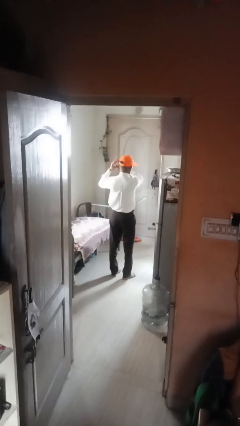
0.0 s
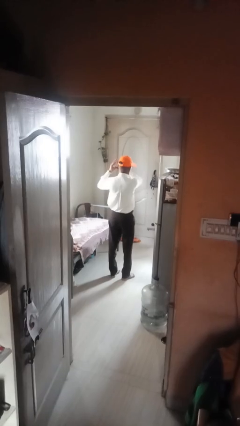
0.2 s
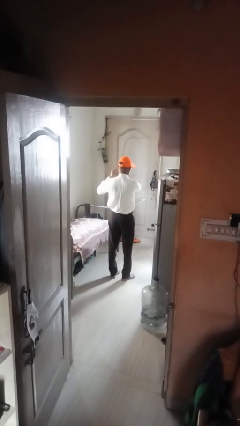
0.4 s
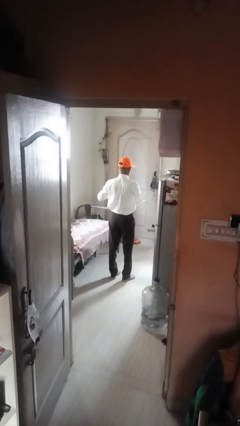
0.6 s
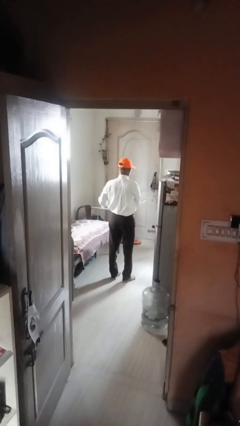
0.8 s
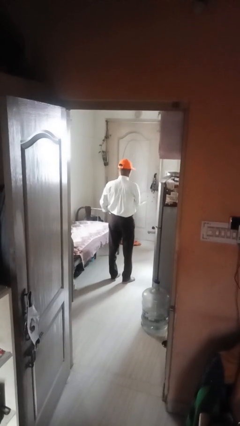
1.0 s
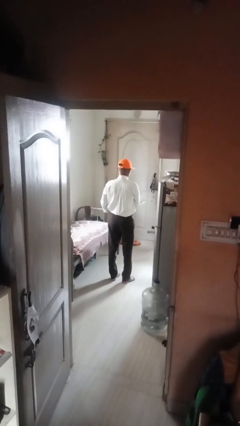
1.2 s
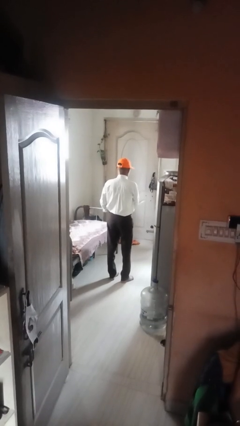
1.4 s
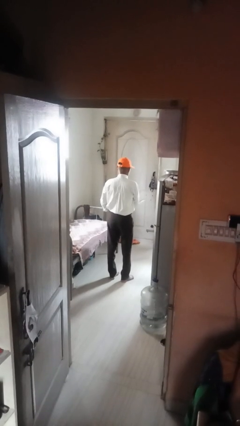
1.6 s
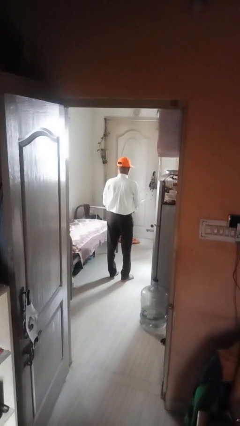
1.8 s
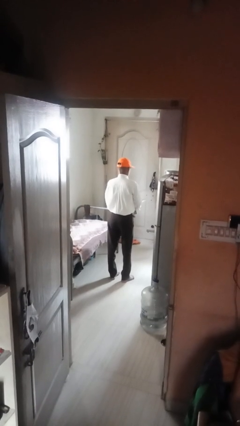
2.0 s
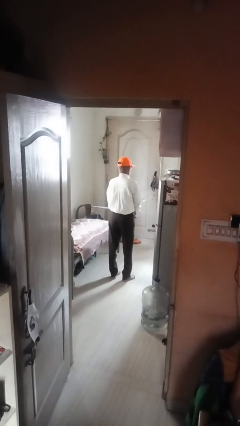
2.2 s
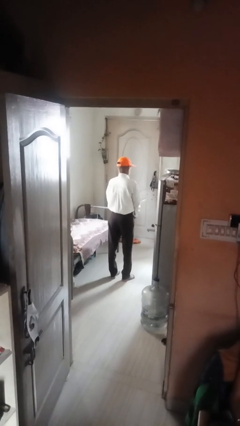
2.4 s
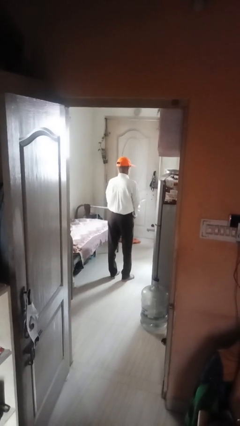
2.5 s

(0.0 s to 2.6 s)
person gestures heart

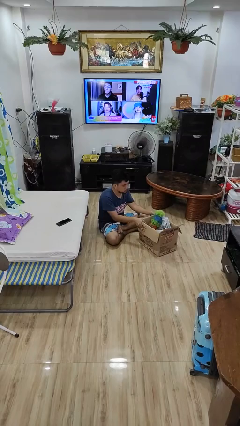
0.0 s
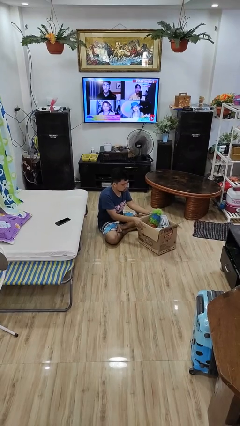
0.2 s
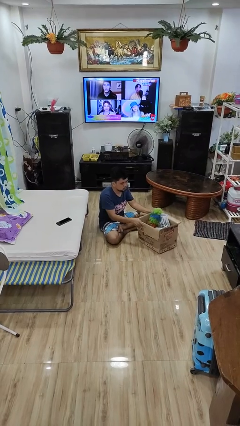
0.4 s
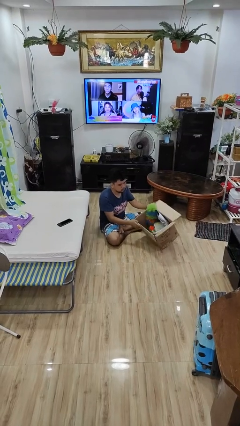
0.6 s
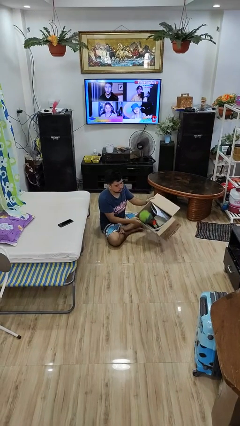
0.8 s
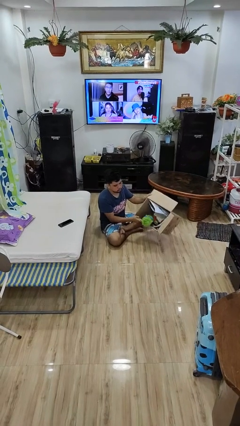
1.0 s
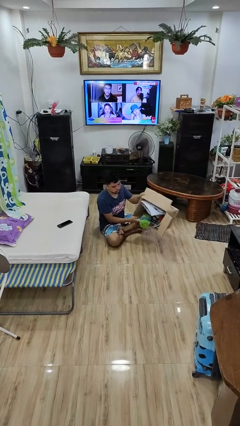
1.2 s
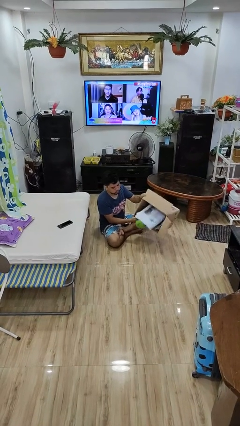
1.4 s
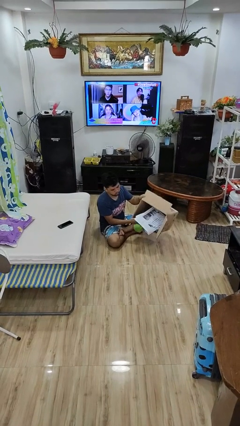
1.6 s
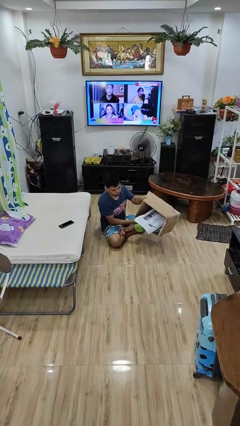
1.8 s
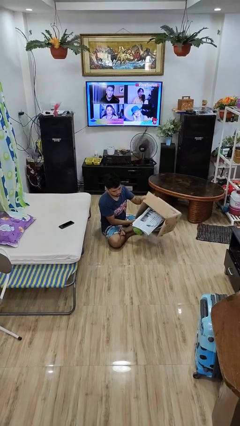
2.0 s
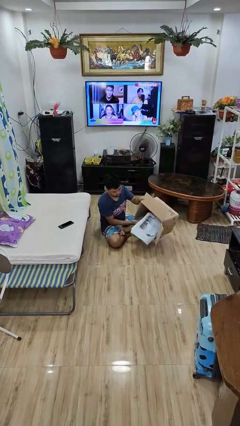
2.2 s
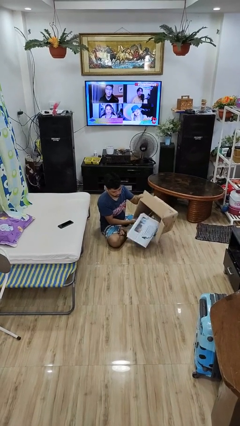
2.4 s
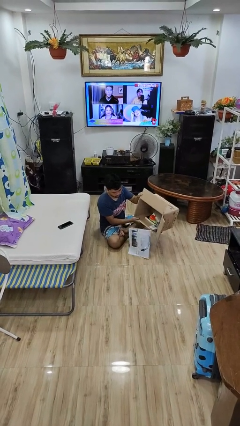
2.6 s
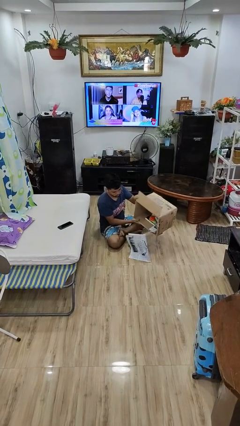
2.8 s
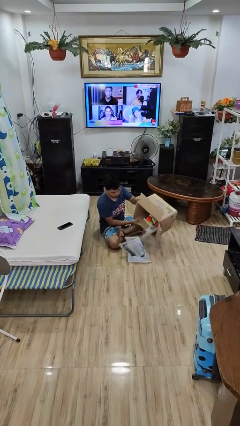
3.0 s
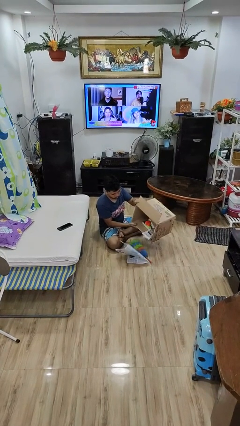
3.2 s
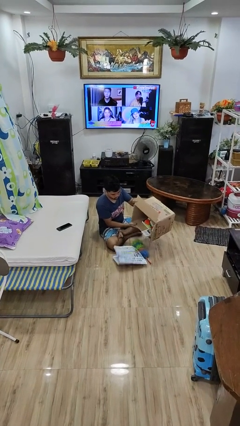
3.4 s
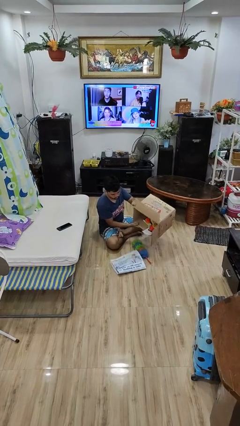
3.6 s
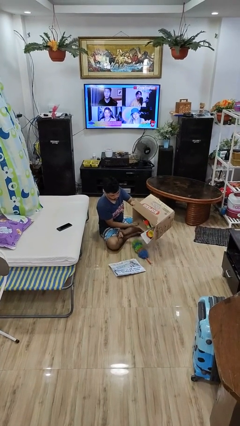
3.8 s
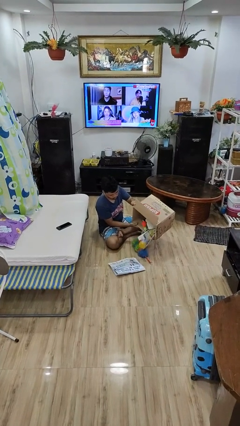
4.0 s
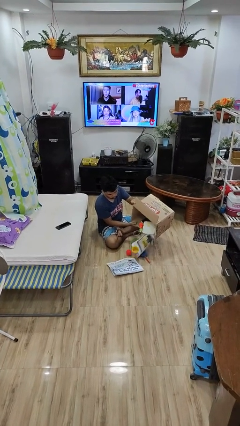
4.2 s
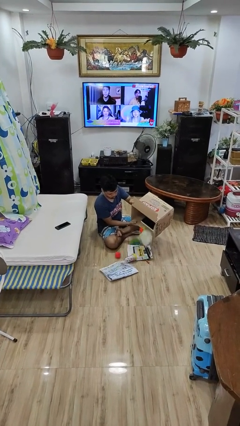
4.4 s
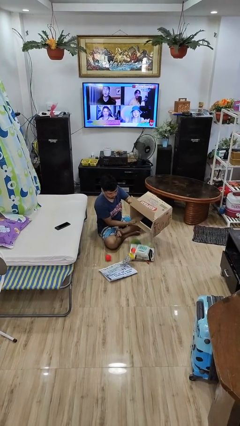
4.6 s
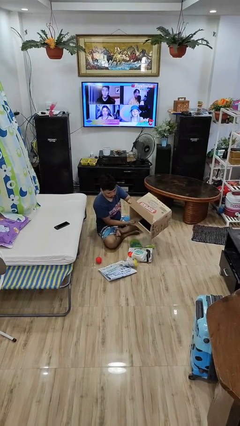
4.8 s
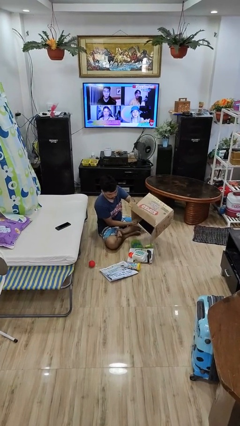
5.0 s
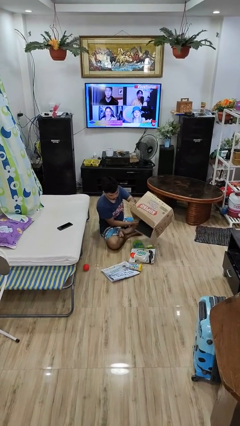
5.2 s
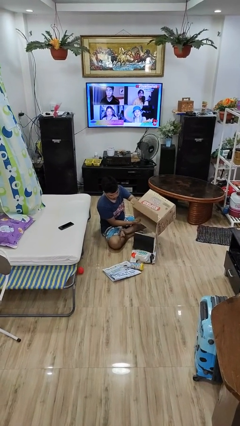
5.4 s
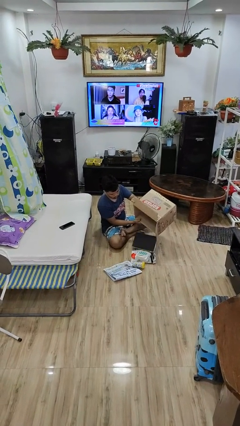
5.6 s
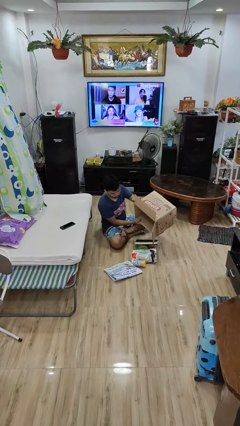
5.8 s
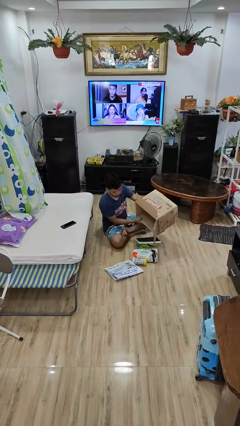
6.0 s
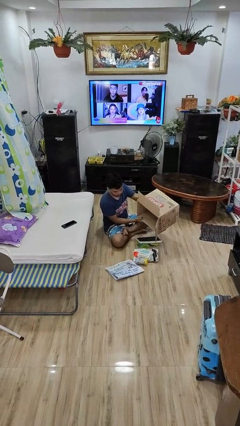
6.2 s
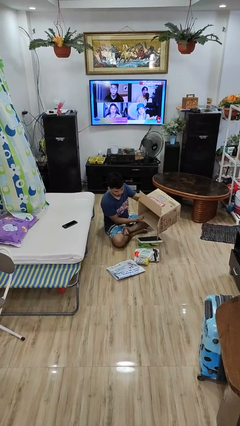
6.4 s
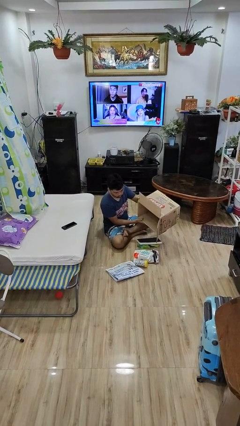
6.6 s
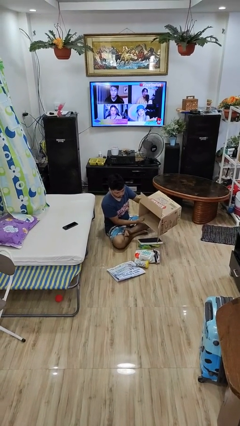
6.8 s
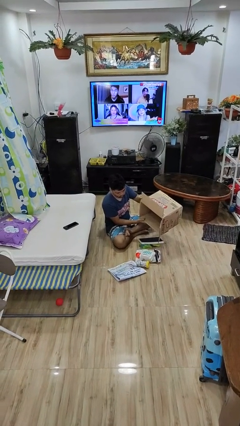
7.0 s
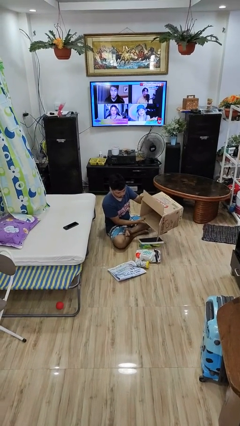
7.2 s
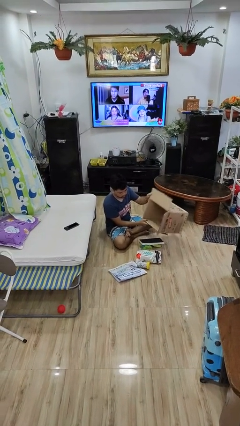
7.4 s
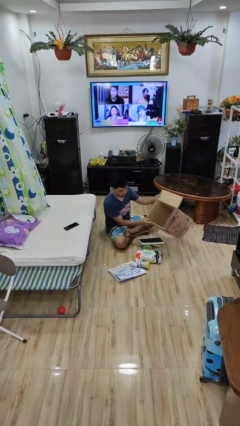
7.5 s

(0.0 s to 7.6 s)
person unloads box onto floor

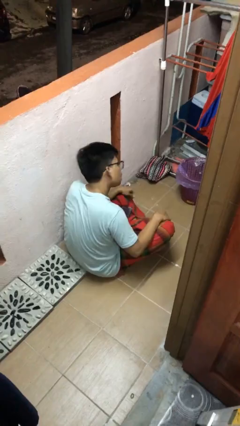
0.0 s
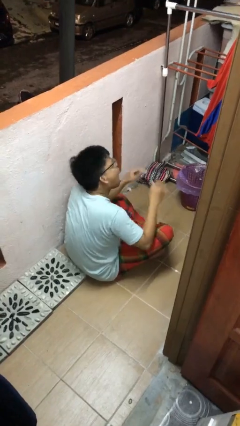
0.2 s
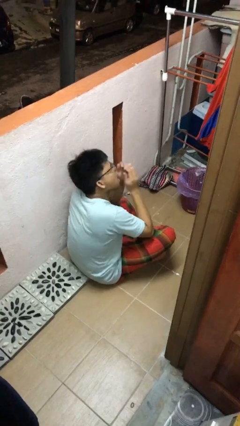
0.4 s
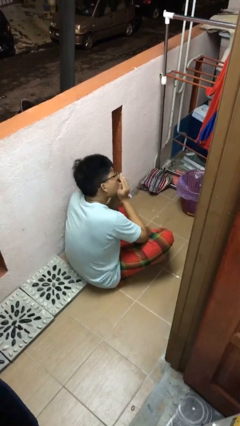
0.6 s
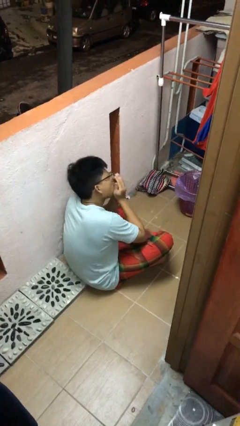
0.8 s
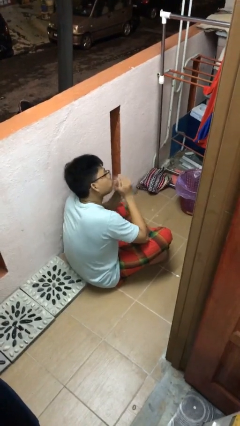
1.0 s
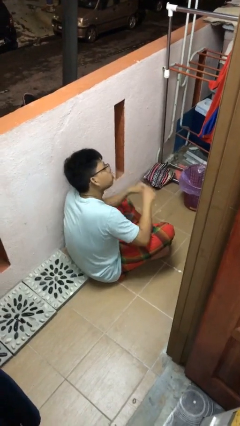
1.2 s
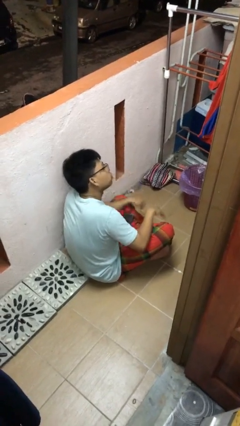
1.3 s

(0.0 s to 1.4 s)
person sneezes into hand

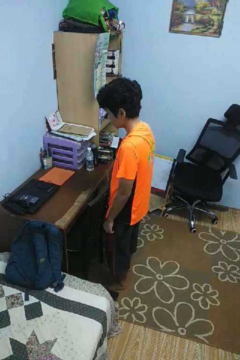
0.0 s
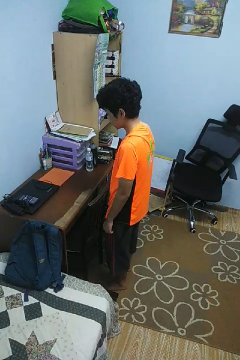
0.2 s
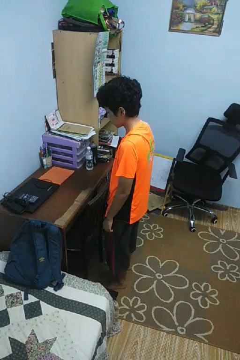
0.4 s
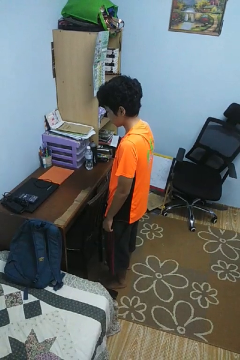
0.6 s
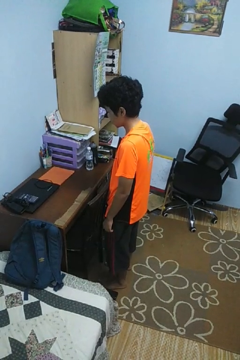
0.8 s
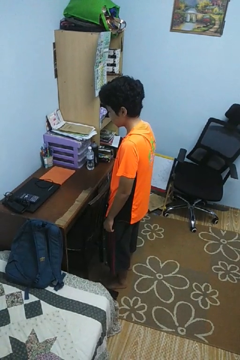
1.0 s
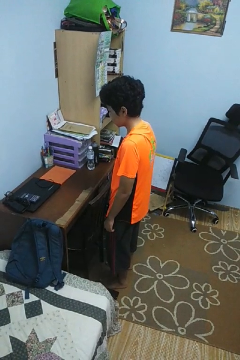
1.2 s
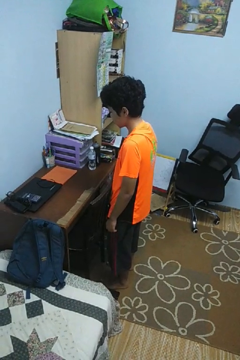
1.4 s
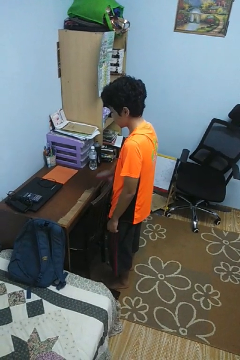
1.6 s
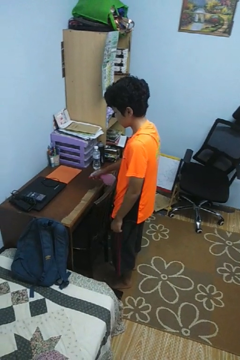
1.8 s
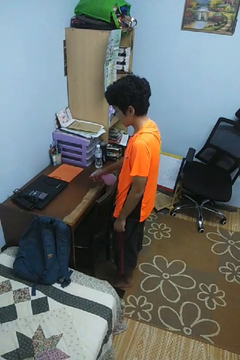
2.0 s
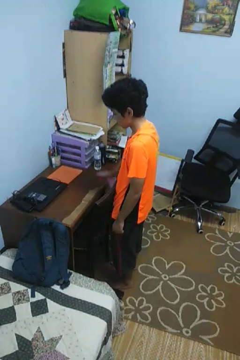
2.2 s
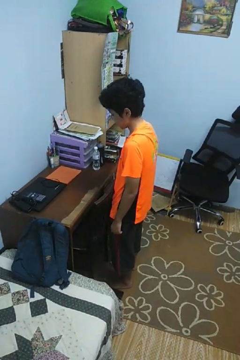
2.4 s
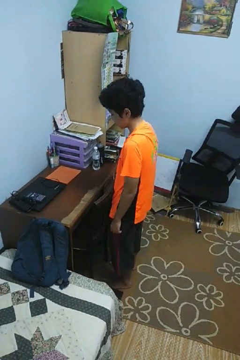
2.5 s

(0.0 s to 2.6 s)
person sprays from bottle

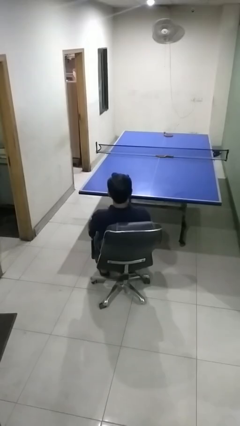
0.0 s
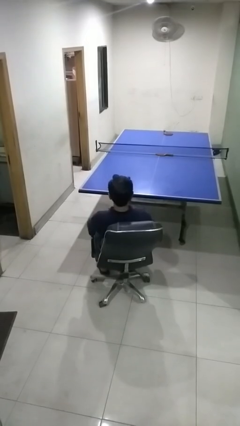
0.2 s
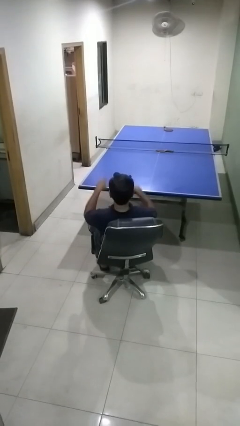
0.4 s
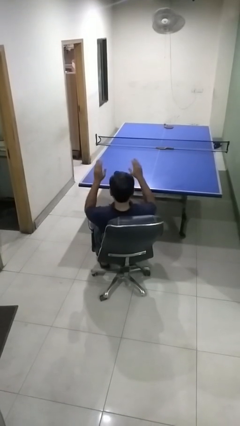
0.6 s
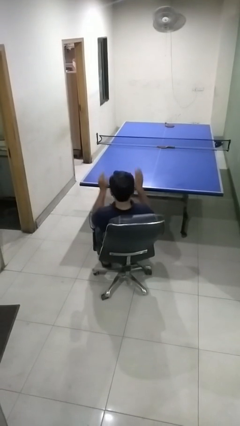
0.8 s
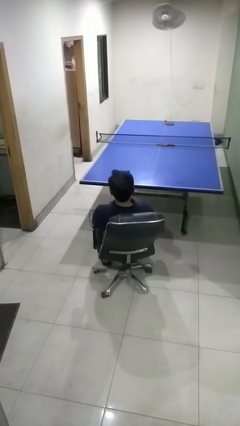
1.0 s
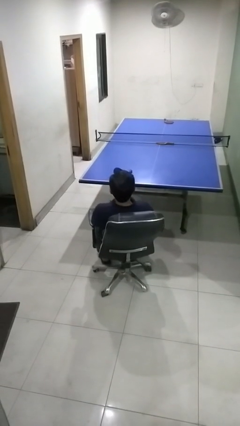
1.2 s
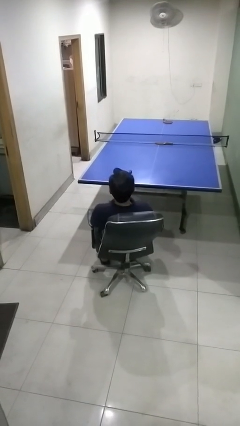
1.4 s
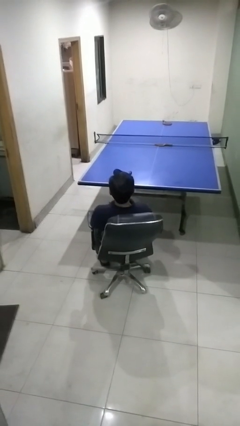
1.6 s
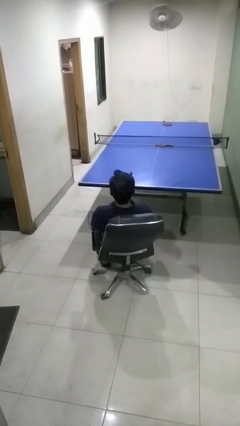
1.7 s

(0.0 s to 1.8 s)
person slaps hands on thighs

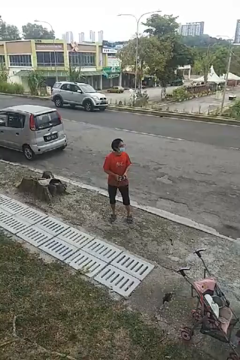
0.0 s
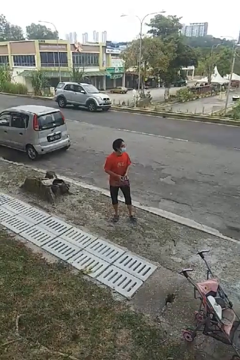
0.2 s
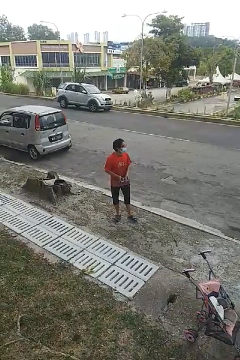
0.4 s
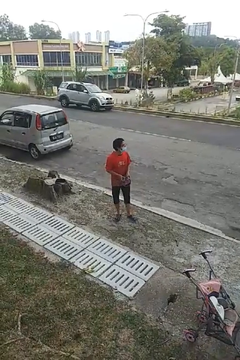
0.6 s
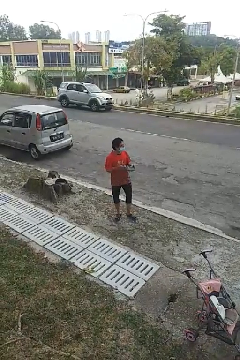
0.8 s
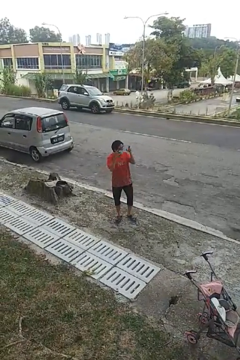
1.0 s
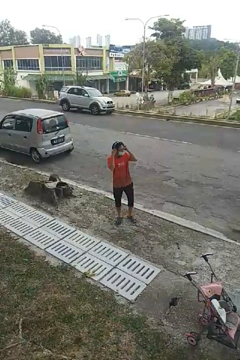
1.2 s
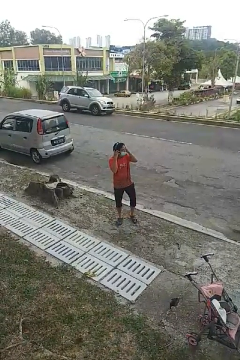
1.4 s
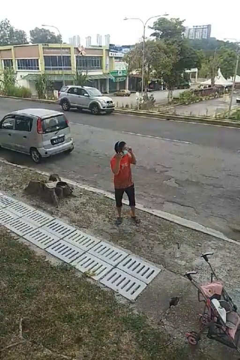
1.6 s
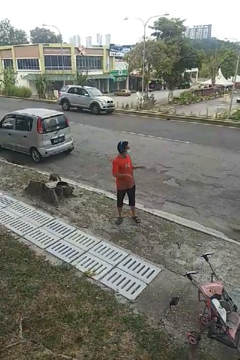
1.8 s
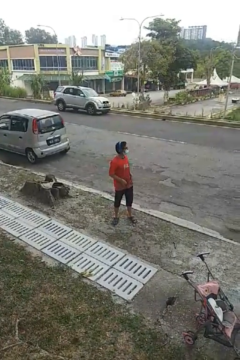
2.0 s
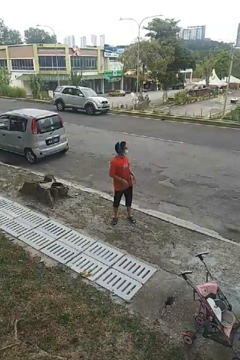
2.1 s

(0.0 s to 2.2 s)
person puts on headphones
